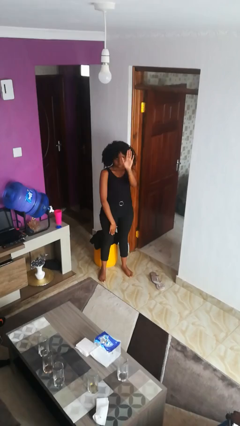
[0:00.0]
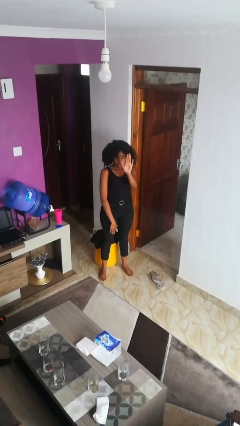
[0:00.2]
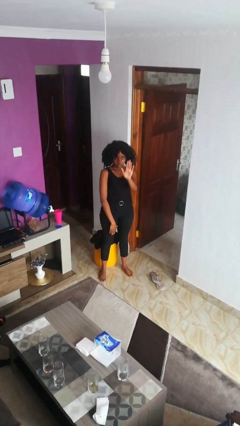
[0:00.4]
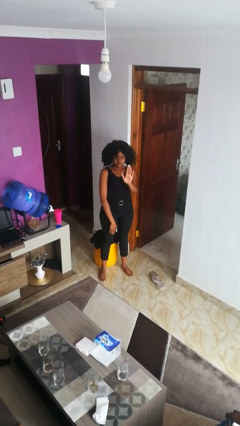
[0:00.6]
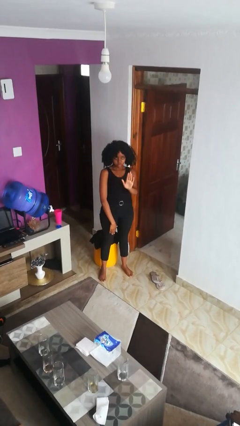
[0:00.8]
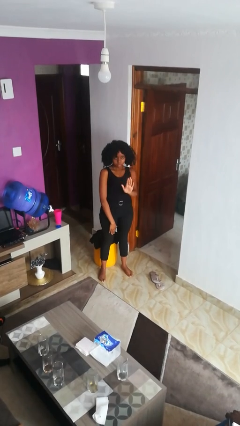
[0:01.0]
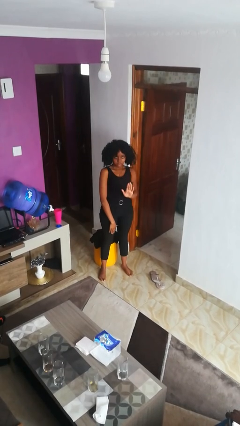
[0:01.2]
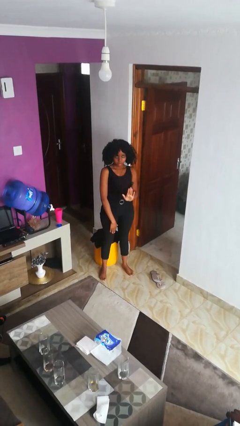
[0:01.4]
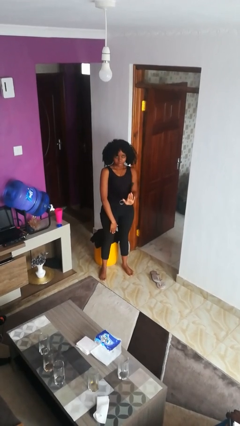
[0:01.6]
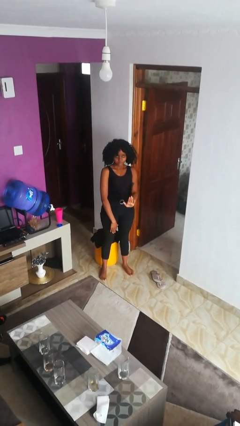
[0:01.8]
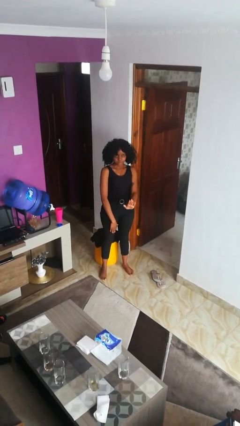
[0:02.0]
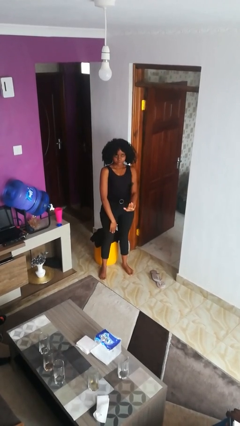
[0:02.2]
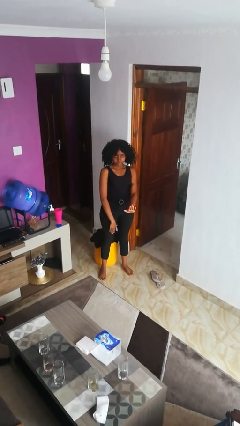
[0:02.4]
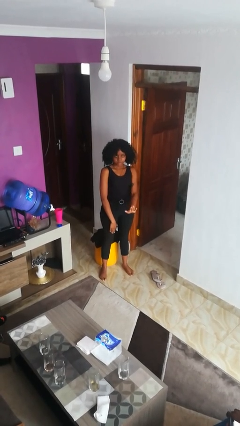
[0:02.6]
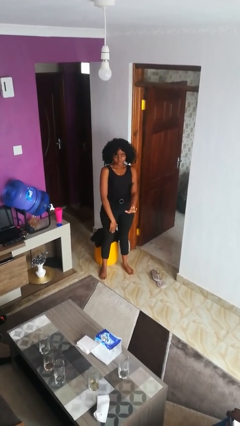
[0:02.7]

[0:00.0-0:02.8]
person gestures swipe down

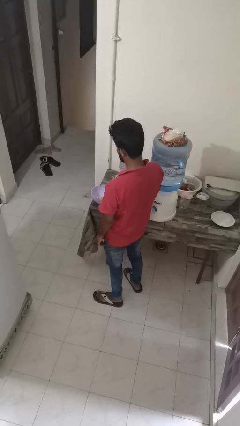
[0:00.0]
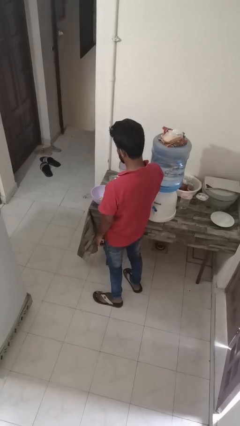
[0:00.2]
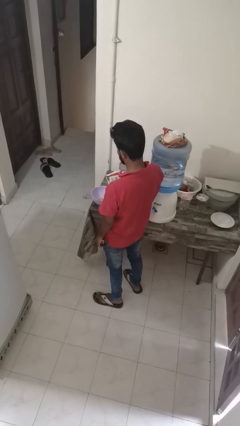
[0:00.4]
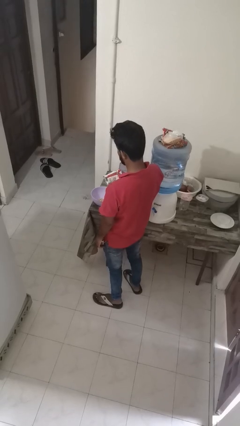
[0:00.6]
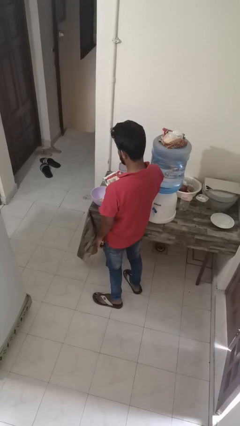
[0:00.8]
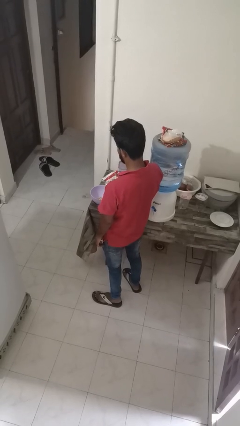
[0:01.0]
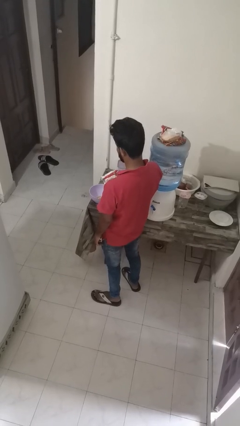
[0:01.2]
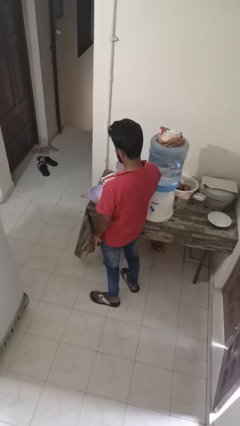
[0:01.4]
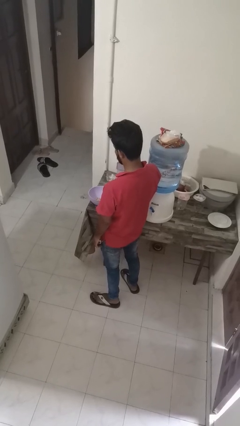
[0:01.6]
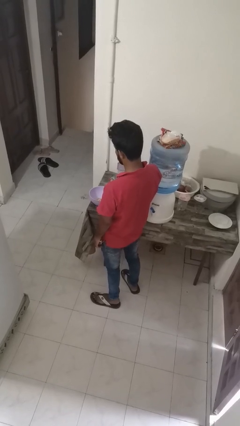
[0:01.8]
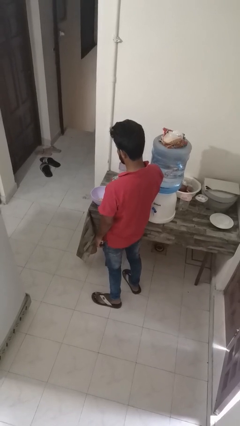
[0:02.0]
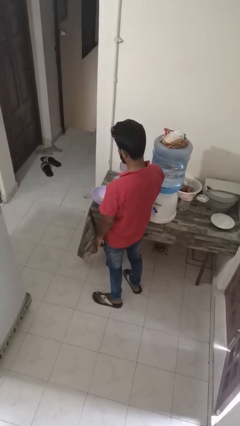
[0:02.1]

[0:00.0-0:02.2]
person pours into bowl

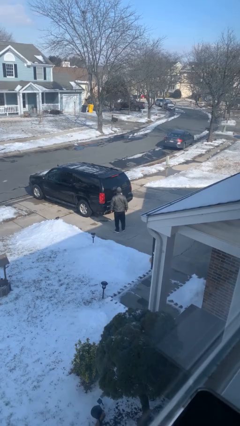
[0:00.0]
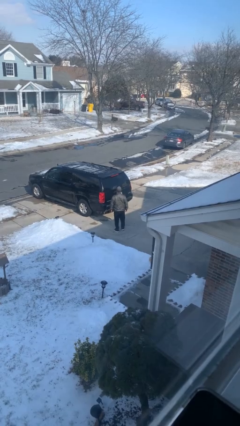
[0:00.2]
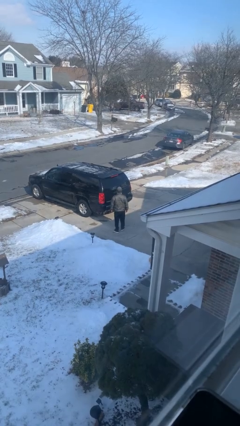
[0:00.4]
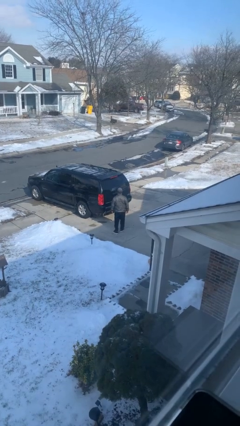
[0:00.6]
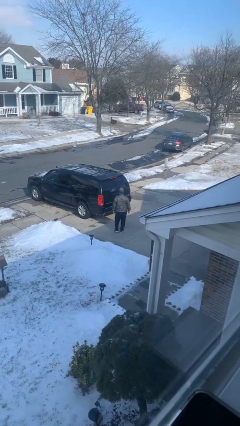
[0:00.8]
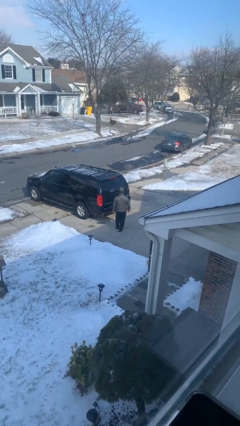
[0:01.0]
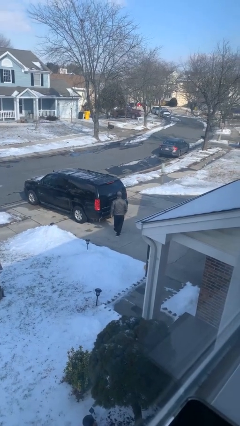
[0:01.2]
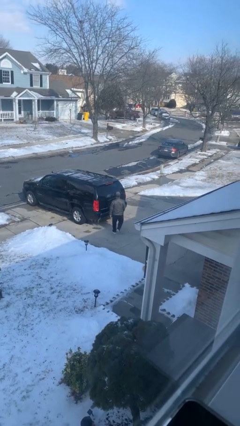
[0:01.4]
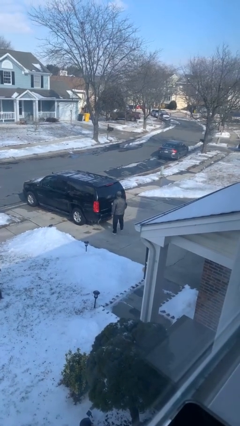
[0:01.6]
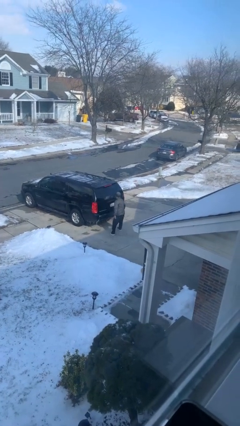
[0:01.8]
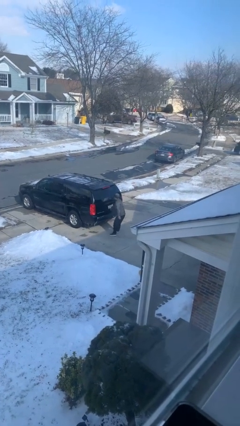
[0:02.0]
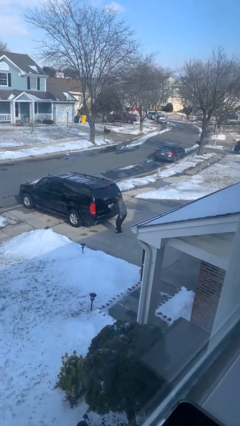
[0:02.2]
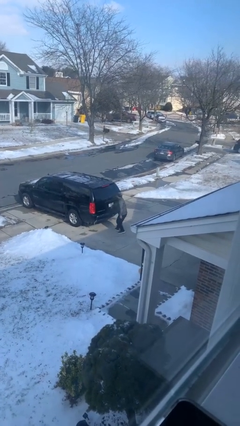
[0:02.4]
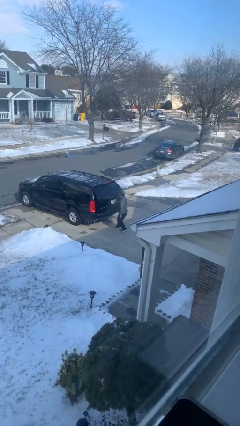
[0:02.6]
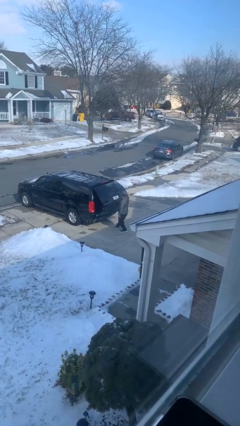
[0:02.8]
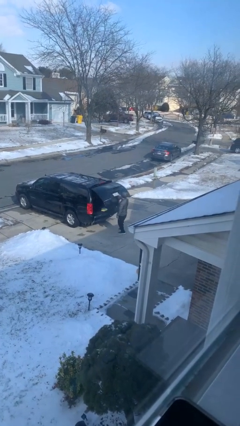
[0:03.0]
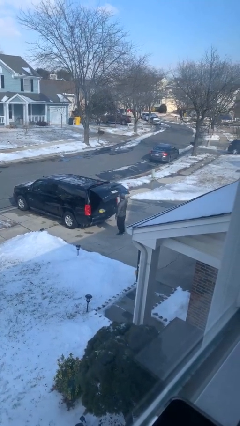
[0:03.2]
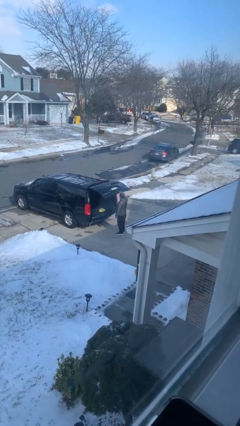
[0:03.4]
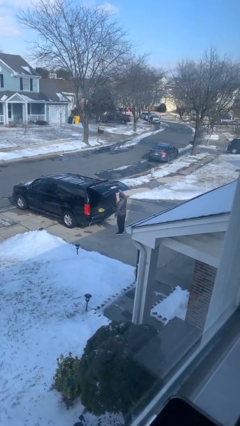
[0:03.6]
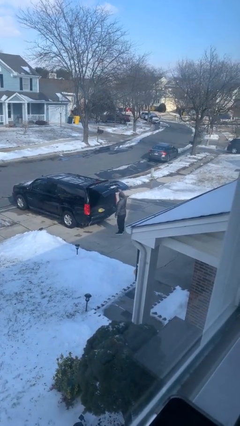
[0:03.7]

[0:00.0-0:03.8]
person opens car trunk

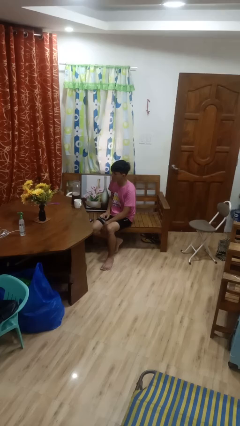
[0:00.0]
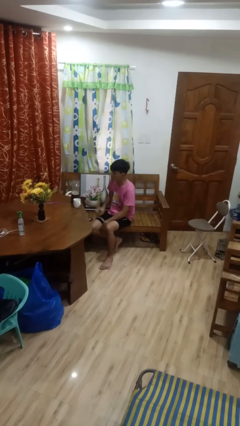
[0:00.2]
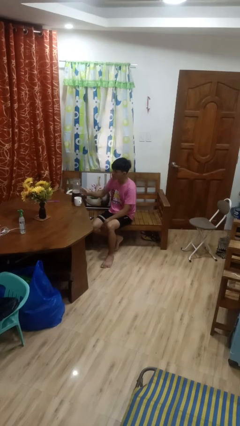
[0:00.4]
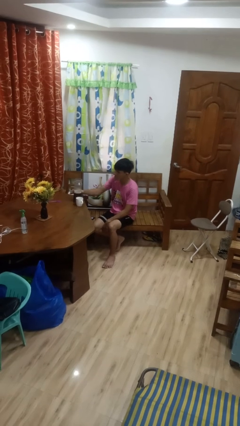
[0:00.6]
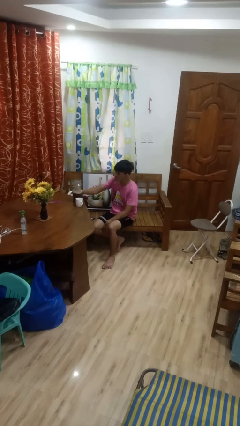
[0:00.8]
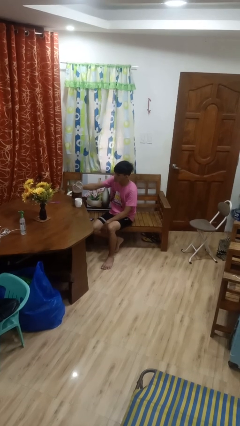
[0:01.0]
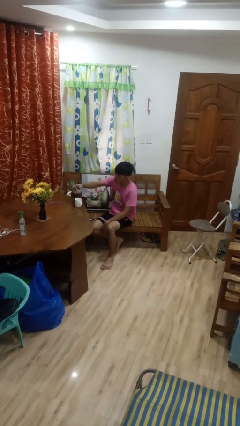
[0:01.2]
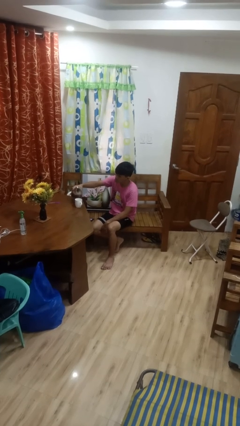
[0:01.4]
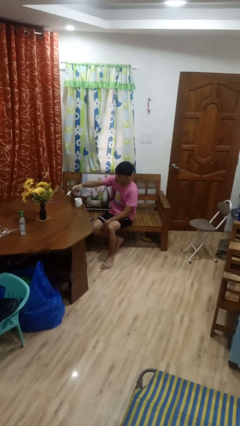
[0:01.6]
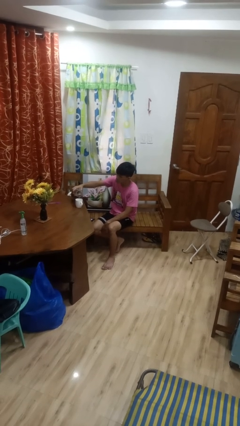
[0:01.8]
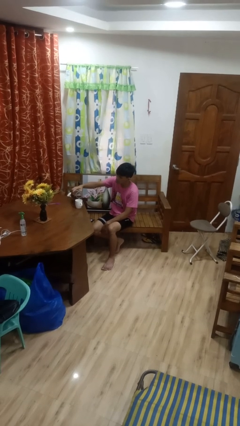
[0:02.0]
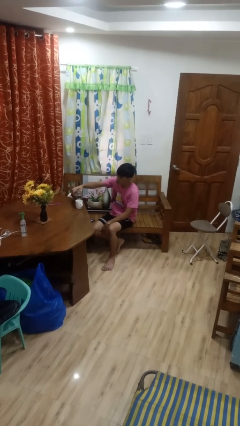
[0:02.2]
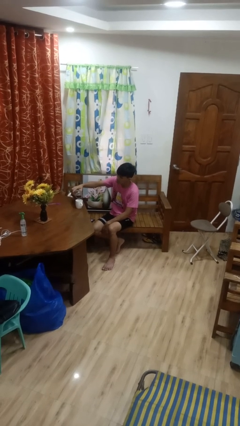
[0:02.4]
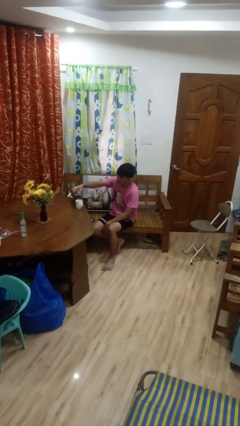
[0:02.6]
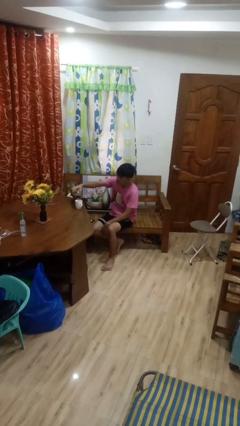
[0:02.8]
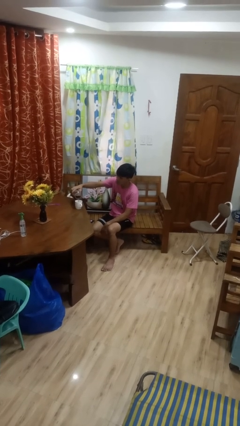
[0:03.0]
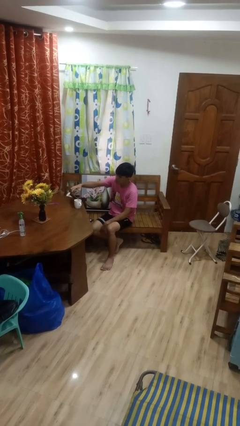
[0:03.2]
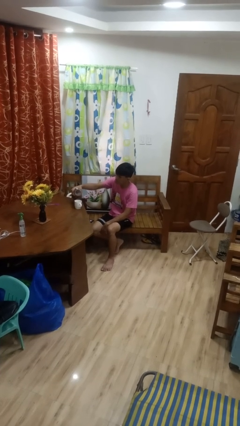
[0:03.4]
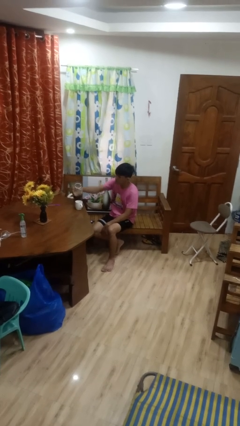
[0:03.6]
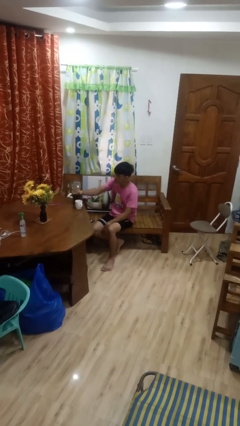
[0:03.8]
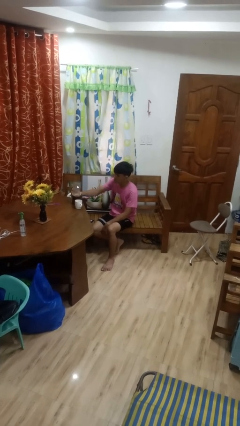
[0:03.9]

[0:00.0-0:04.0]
person pours coffee into mug

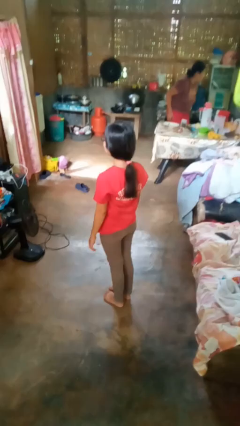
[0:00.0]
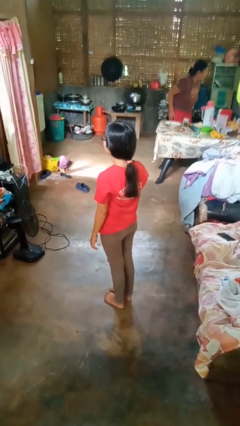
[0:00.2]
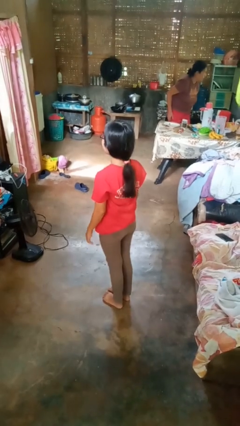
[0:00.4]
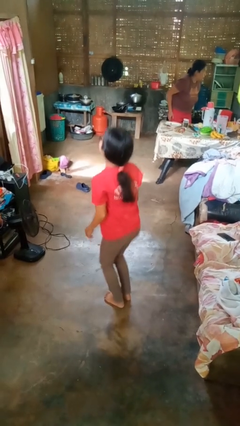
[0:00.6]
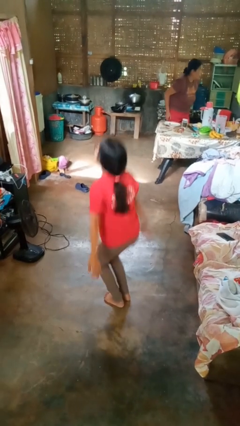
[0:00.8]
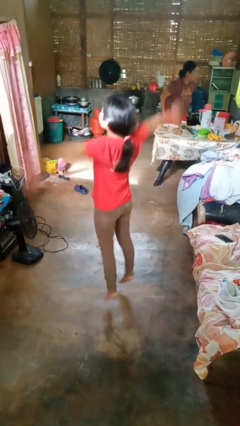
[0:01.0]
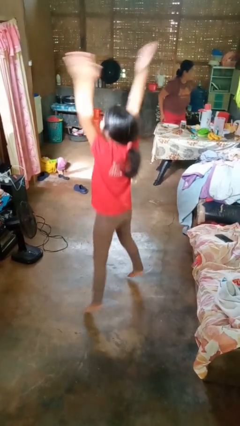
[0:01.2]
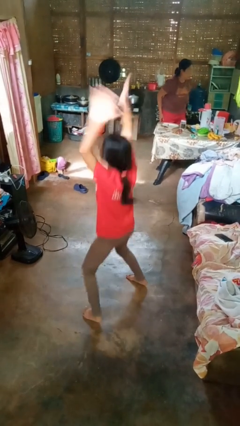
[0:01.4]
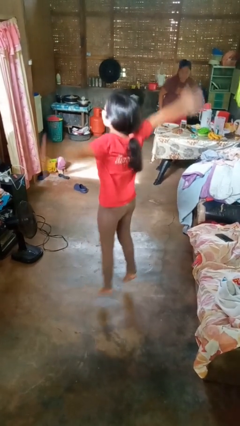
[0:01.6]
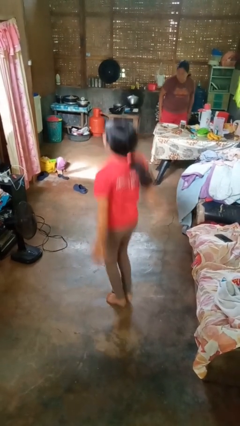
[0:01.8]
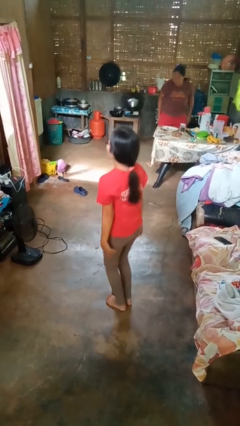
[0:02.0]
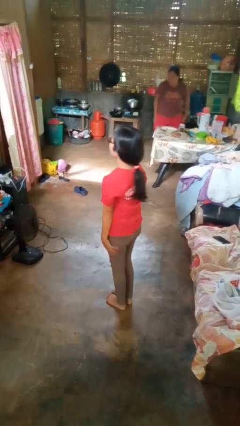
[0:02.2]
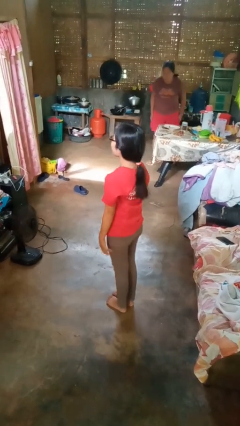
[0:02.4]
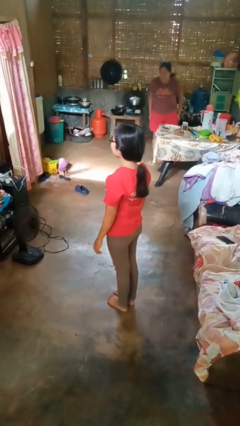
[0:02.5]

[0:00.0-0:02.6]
person exercises with jumping jacks

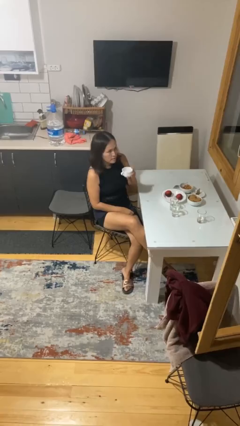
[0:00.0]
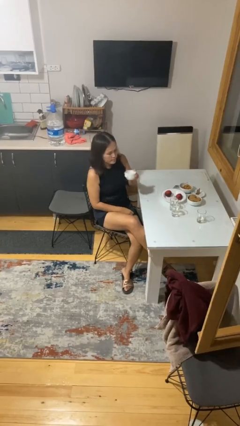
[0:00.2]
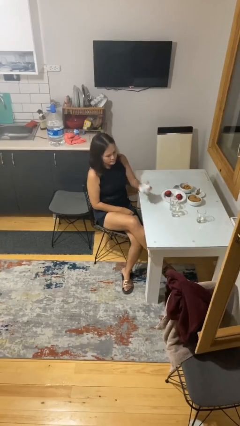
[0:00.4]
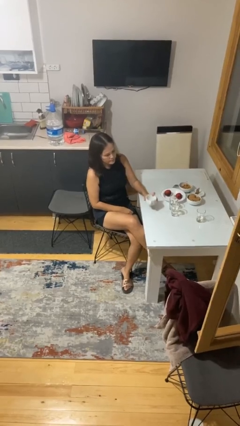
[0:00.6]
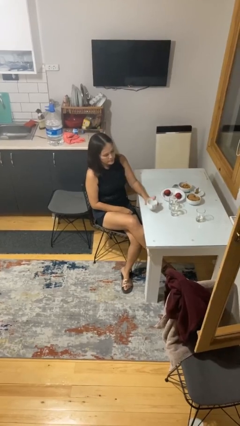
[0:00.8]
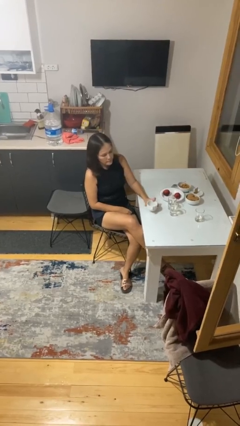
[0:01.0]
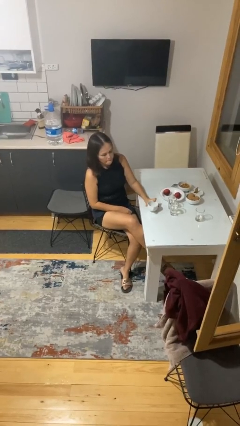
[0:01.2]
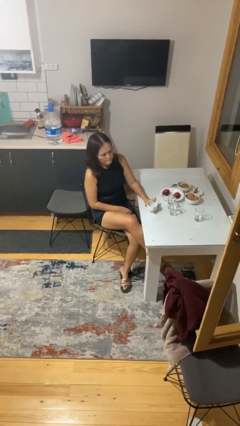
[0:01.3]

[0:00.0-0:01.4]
person puts down object on table

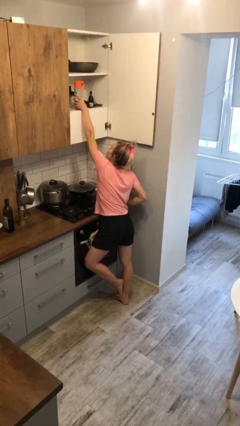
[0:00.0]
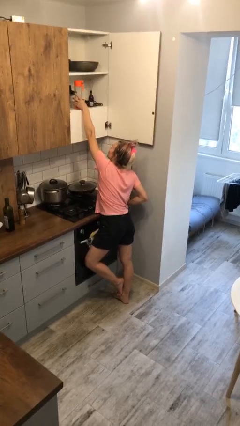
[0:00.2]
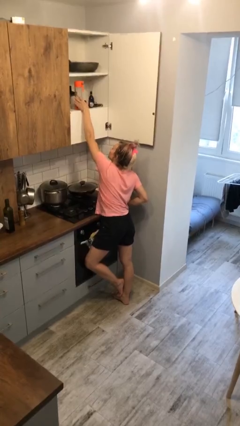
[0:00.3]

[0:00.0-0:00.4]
person puts down object into cabinet
